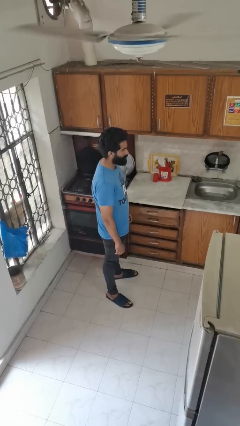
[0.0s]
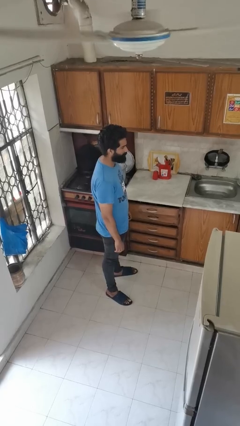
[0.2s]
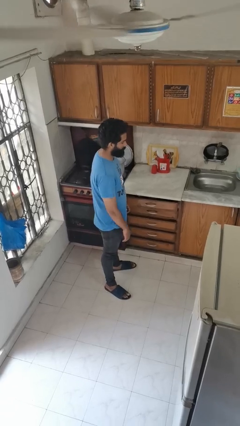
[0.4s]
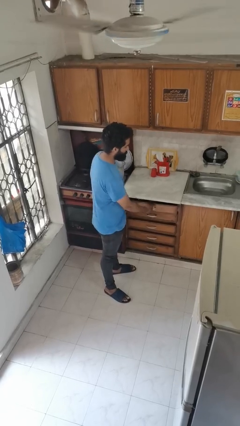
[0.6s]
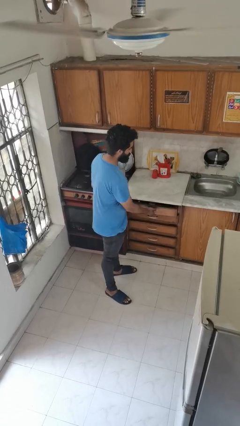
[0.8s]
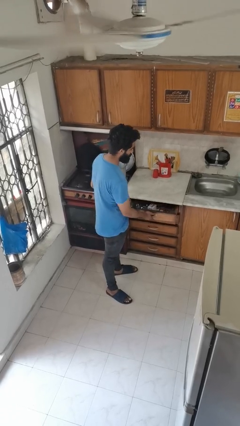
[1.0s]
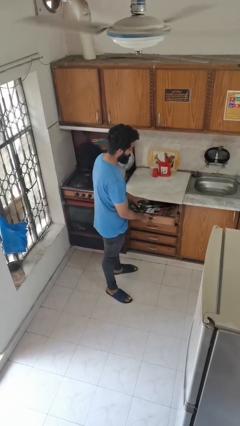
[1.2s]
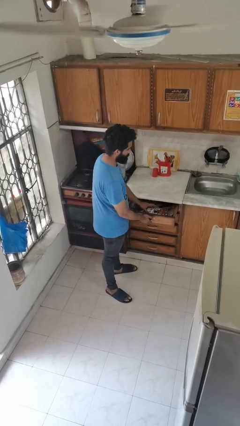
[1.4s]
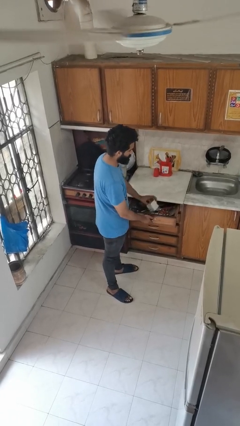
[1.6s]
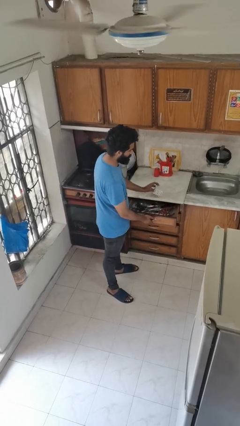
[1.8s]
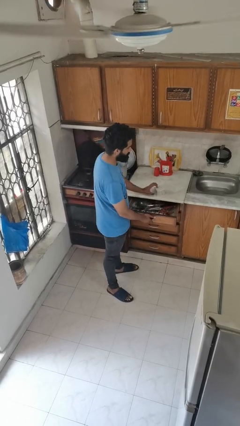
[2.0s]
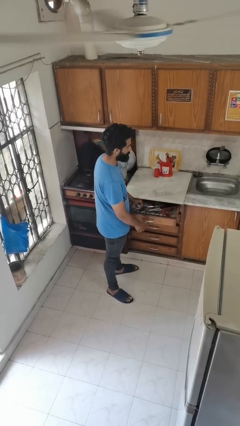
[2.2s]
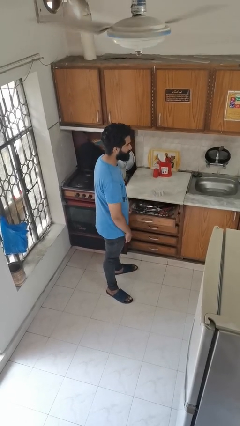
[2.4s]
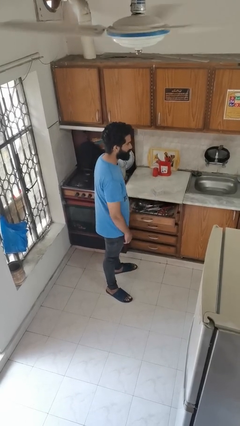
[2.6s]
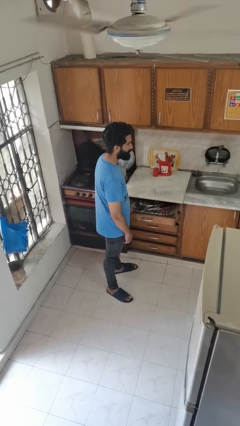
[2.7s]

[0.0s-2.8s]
person takes object from kitchen drawer

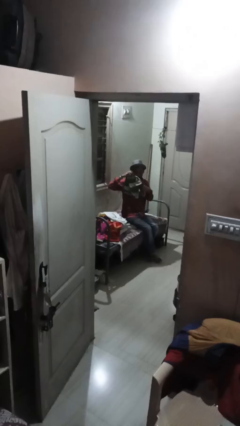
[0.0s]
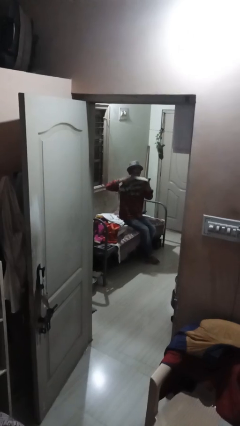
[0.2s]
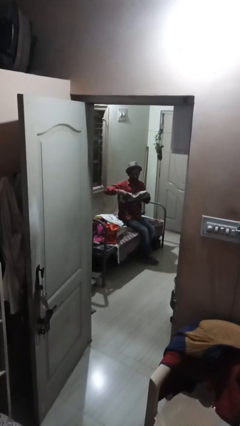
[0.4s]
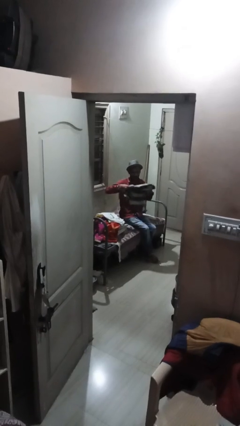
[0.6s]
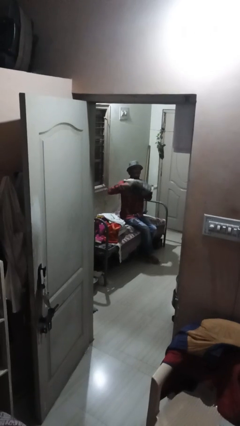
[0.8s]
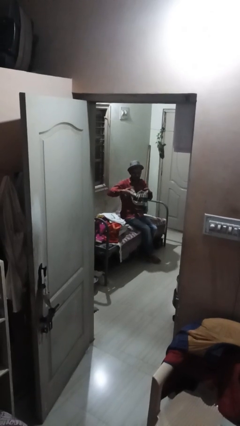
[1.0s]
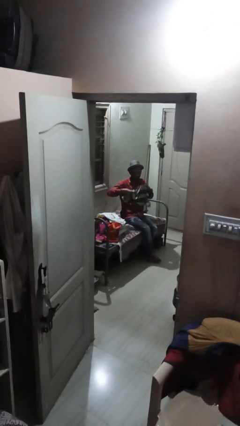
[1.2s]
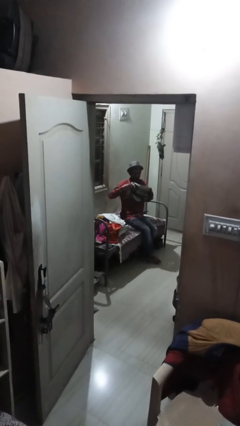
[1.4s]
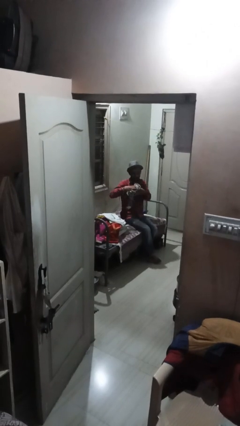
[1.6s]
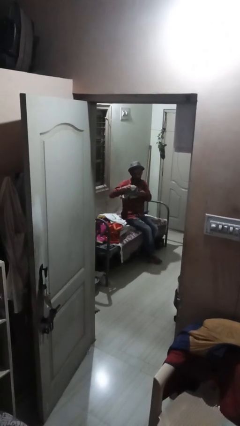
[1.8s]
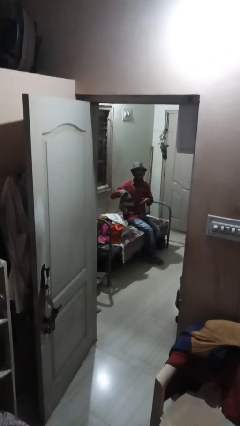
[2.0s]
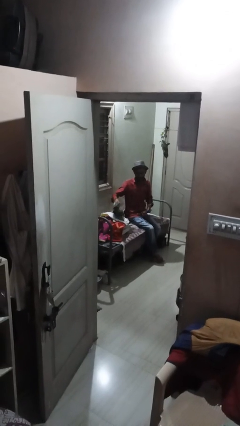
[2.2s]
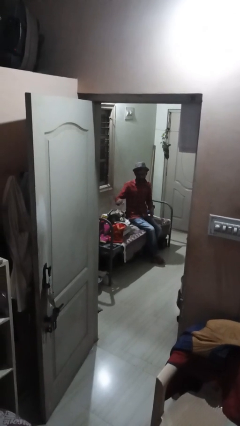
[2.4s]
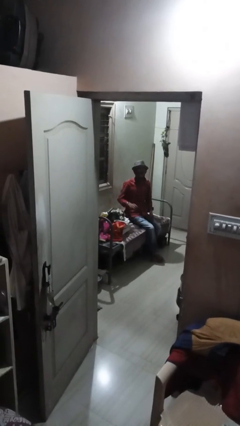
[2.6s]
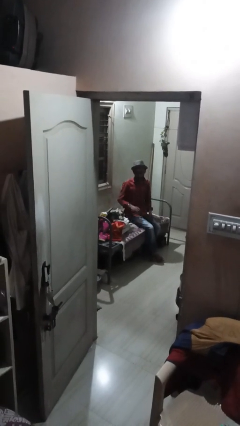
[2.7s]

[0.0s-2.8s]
person folds shirt

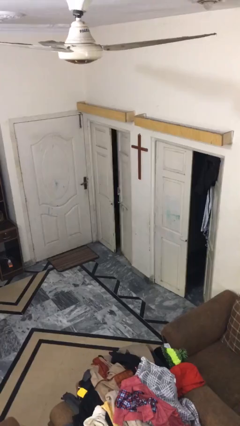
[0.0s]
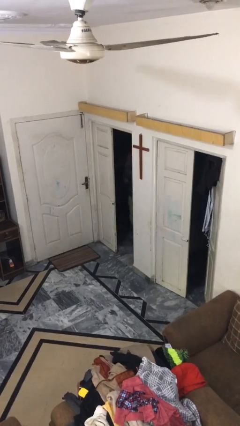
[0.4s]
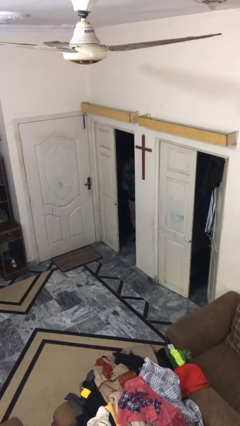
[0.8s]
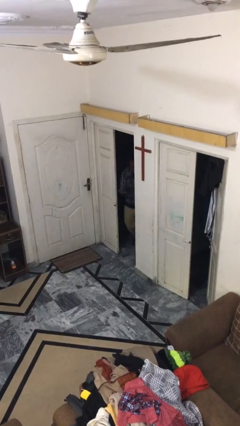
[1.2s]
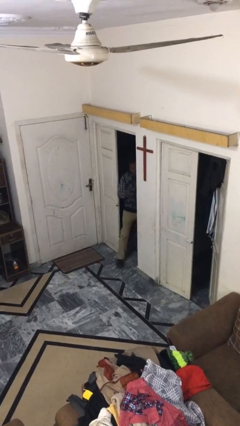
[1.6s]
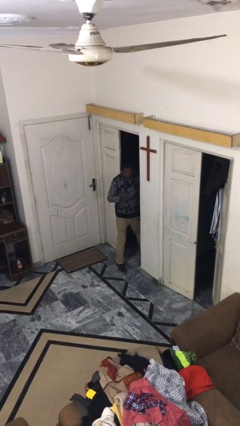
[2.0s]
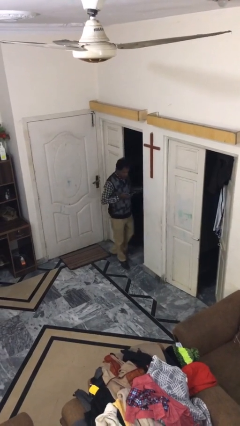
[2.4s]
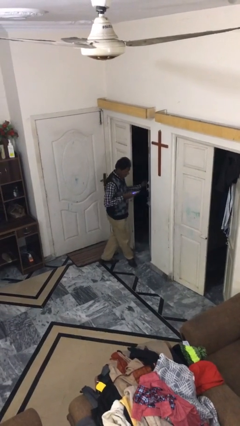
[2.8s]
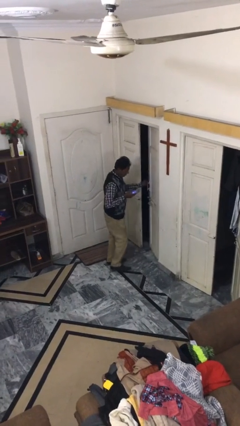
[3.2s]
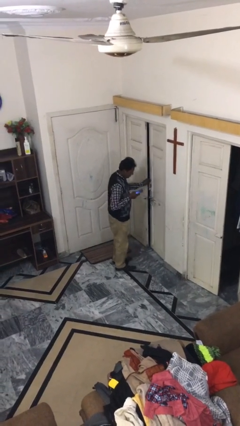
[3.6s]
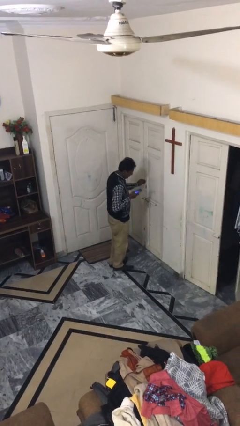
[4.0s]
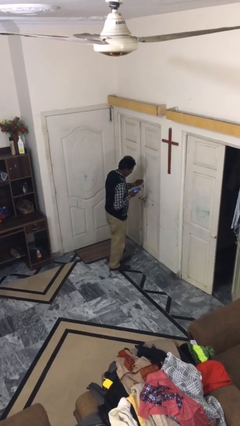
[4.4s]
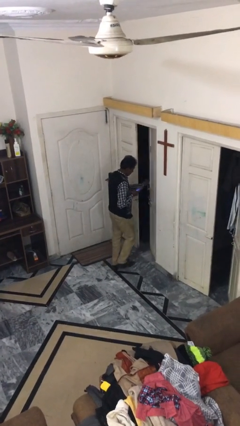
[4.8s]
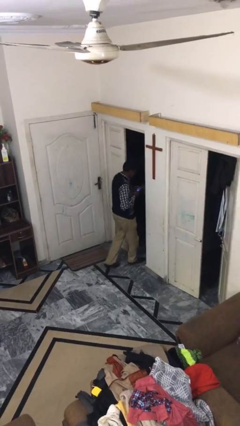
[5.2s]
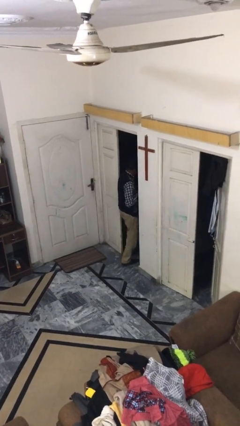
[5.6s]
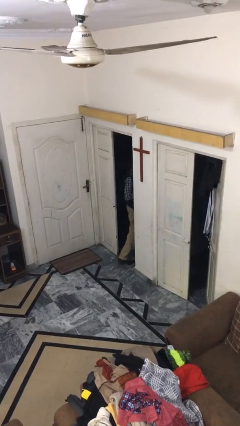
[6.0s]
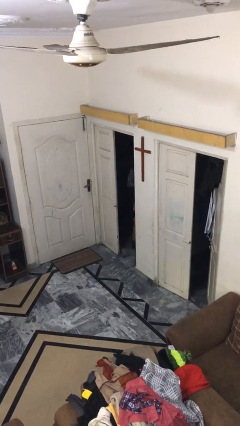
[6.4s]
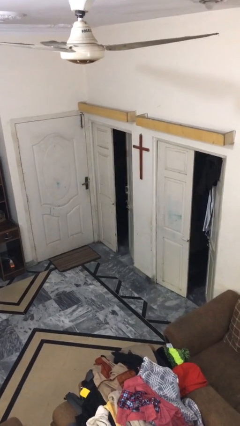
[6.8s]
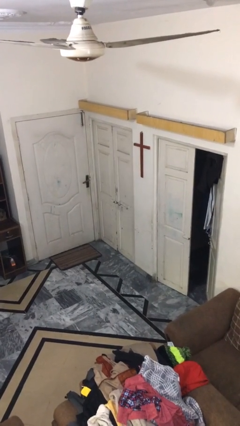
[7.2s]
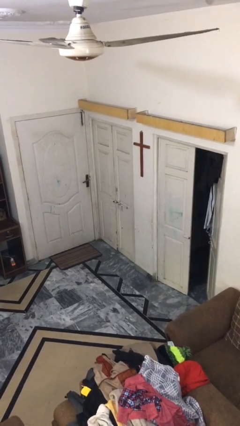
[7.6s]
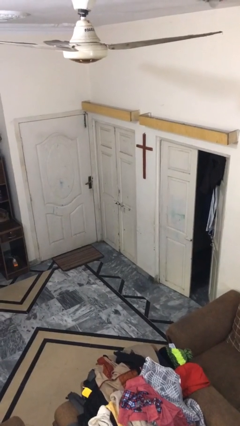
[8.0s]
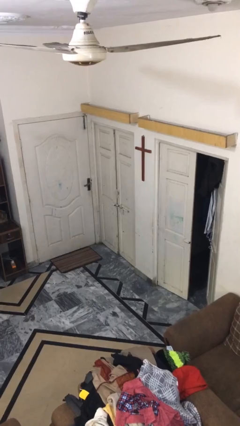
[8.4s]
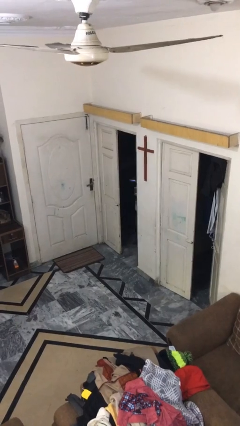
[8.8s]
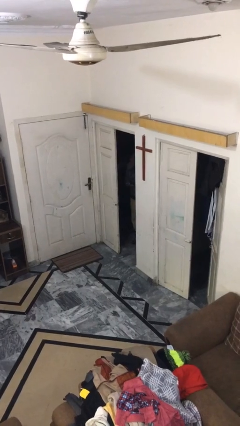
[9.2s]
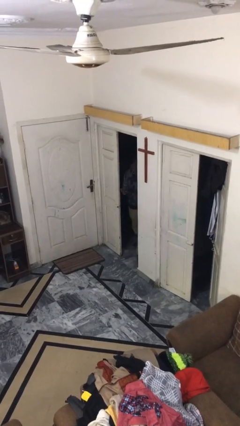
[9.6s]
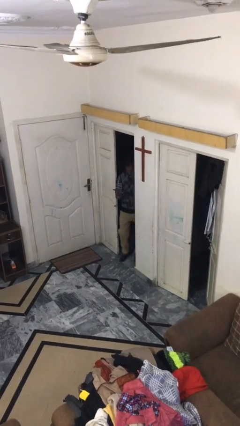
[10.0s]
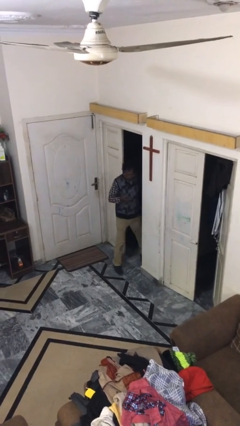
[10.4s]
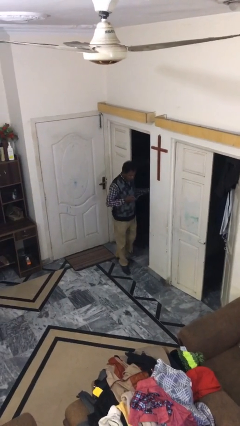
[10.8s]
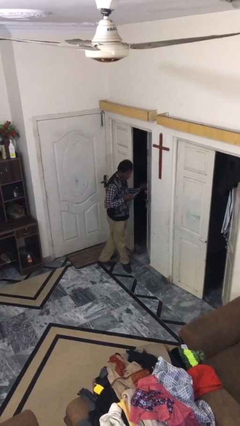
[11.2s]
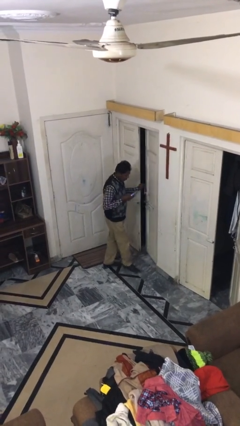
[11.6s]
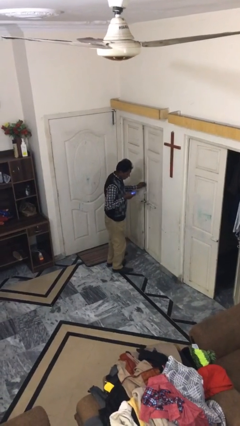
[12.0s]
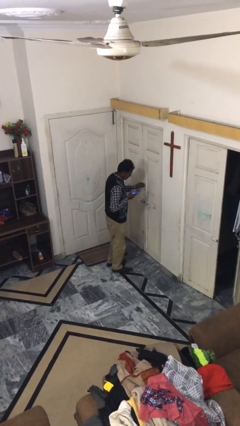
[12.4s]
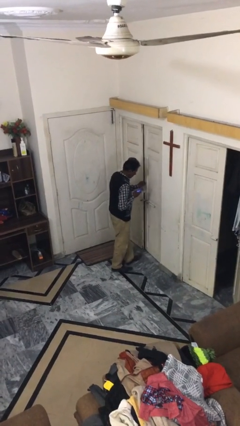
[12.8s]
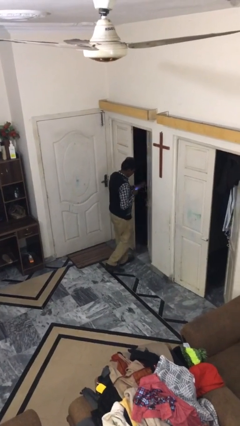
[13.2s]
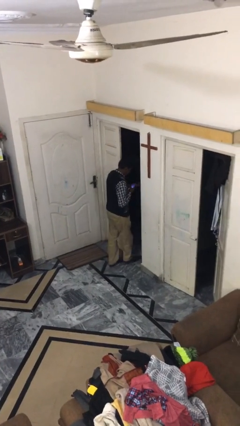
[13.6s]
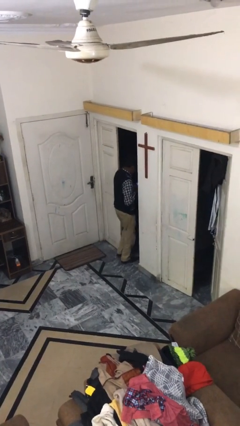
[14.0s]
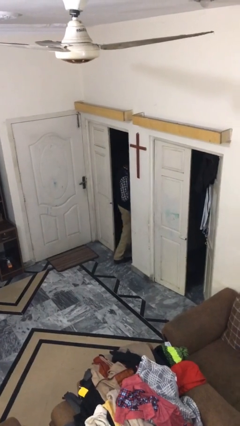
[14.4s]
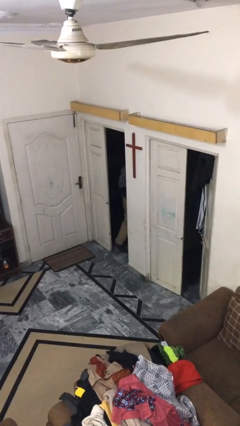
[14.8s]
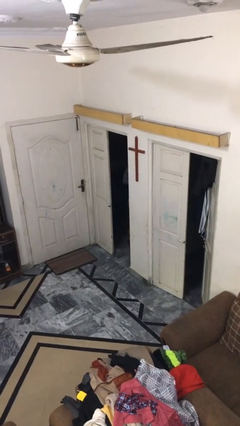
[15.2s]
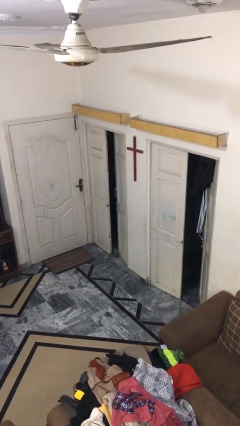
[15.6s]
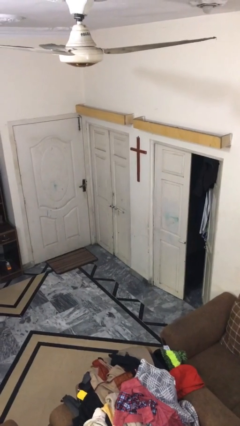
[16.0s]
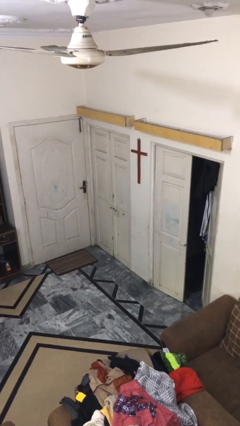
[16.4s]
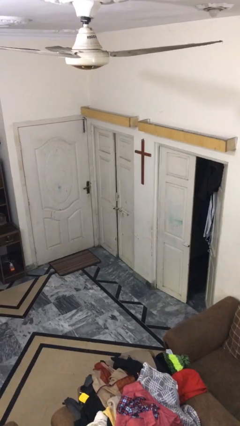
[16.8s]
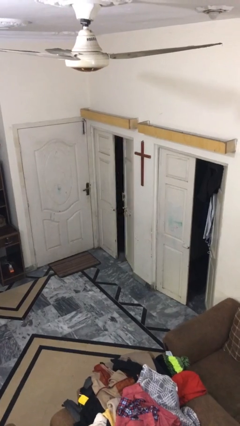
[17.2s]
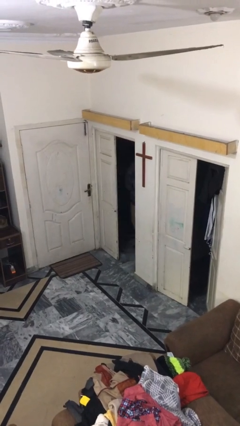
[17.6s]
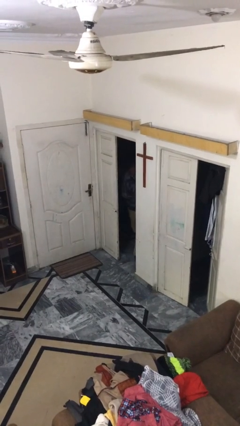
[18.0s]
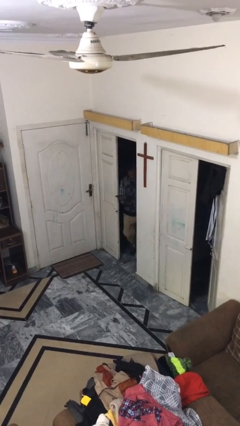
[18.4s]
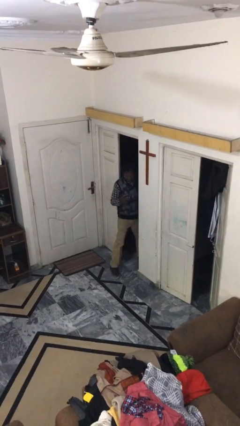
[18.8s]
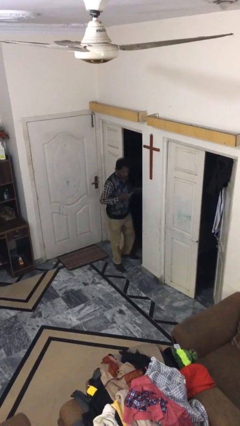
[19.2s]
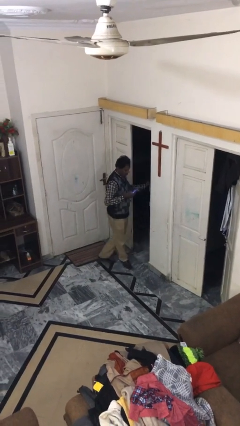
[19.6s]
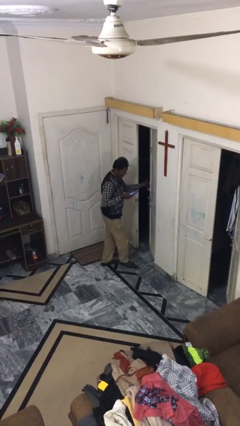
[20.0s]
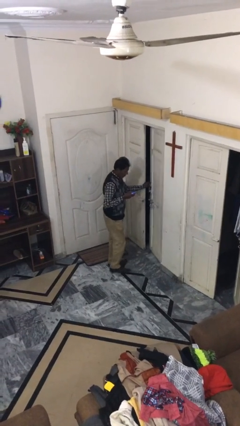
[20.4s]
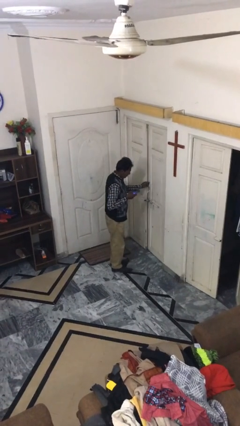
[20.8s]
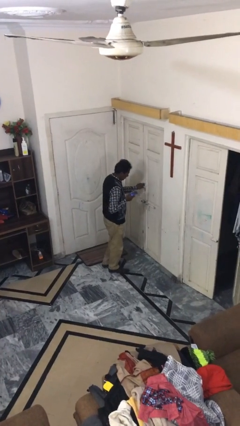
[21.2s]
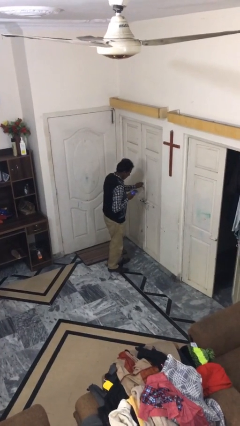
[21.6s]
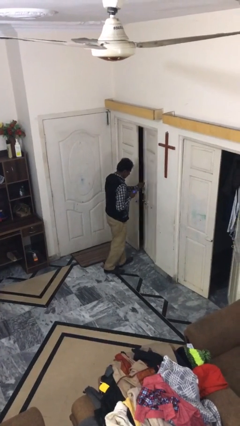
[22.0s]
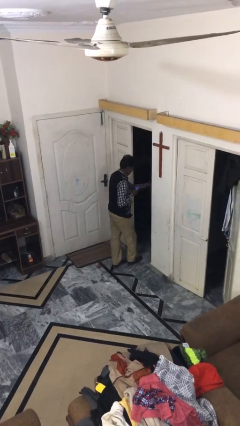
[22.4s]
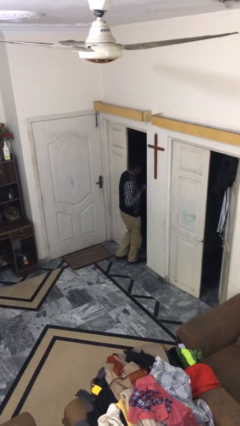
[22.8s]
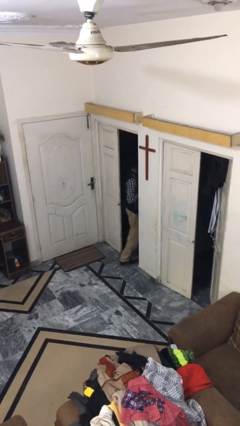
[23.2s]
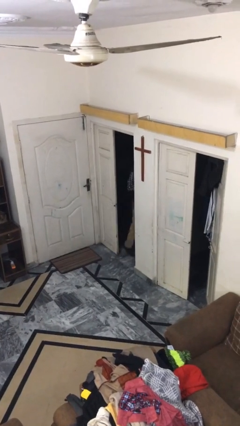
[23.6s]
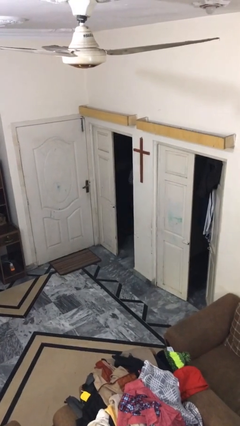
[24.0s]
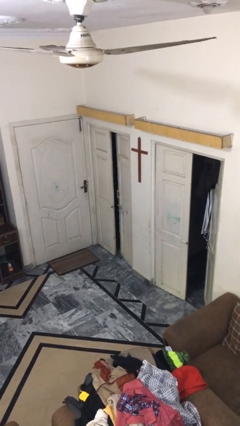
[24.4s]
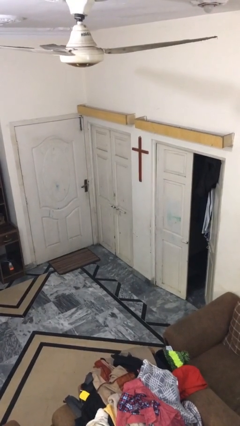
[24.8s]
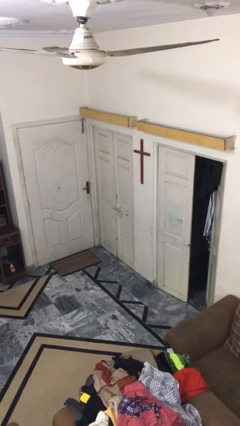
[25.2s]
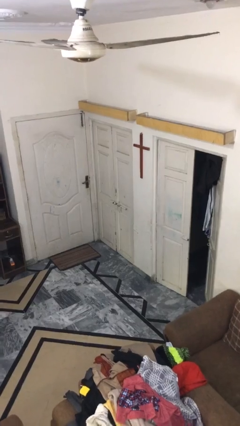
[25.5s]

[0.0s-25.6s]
person texts on phone
